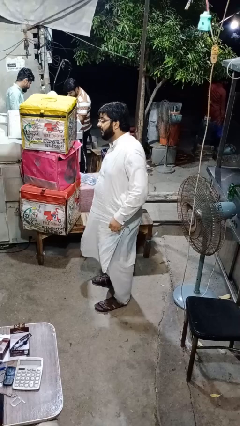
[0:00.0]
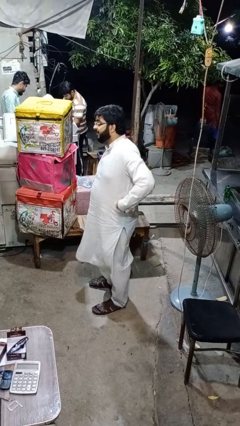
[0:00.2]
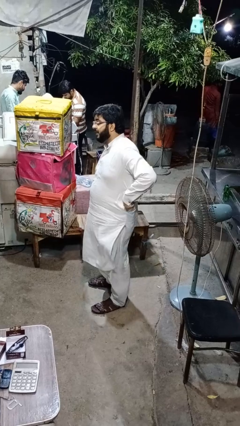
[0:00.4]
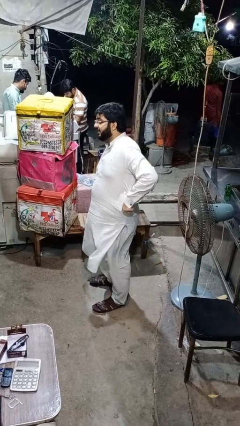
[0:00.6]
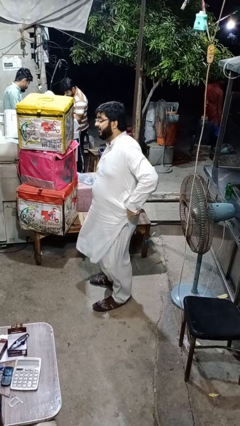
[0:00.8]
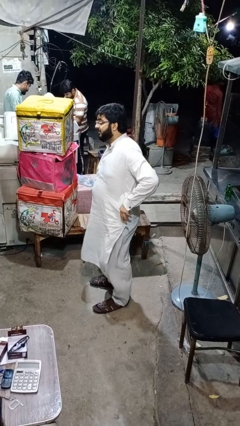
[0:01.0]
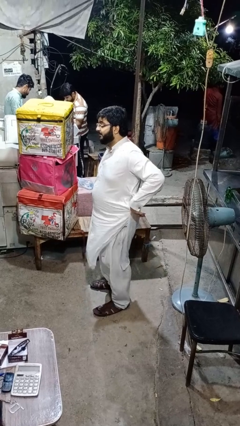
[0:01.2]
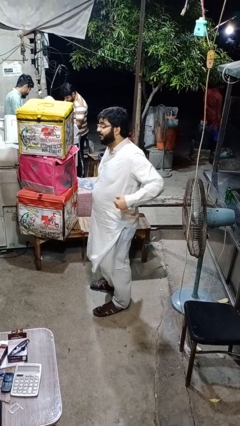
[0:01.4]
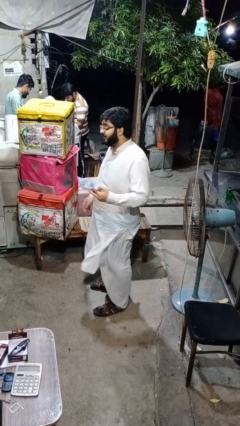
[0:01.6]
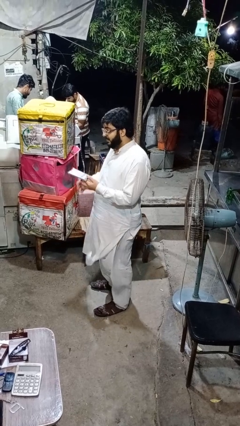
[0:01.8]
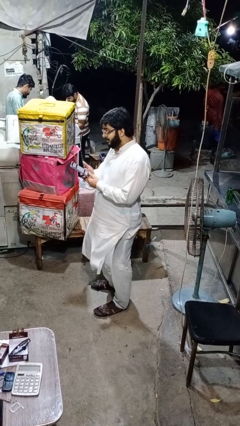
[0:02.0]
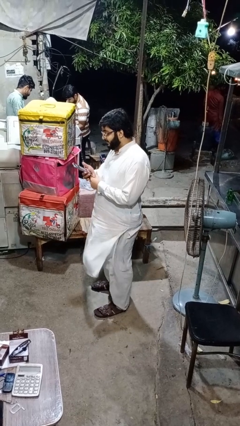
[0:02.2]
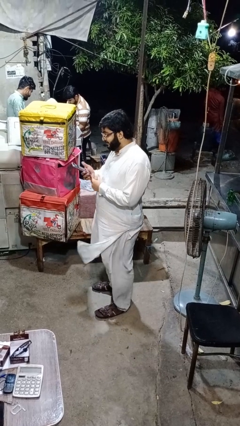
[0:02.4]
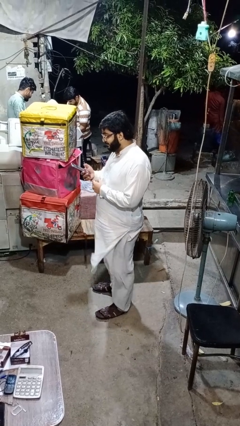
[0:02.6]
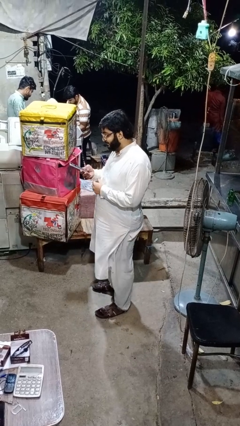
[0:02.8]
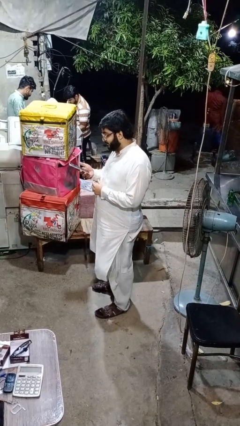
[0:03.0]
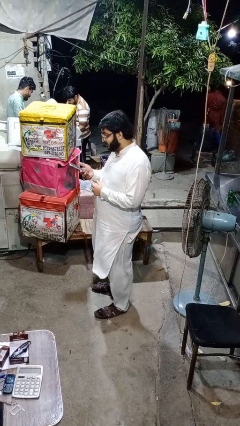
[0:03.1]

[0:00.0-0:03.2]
person takes phone from pocket

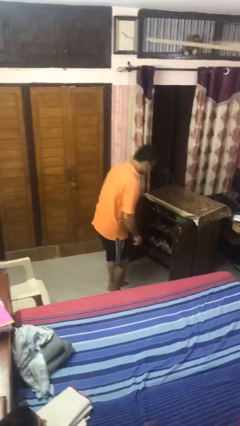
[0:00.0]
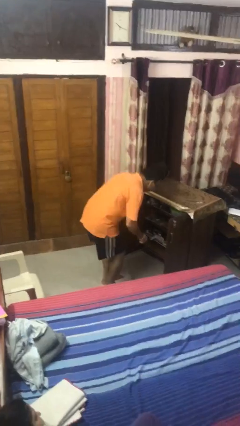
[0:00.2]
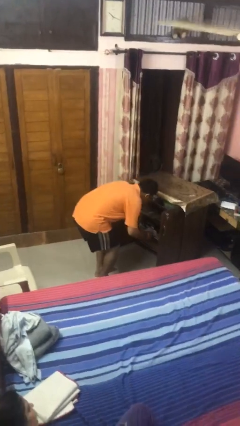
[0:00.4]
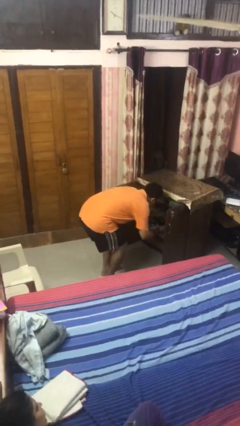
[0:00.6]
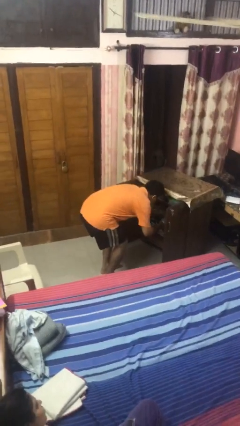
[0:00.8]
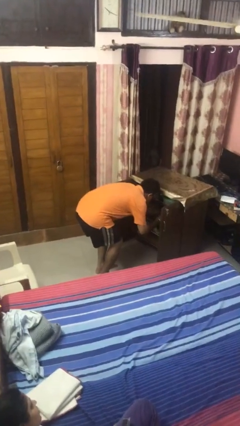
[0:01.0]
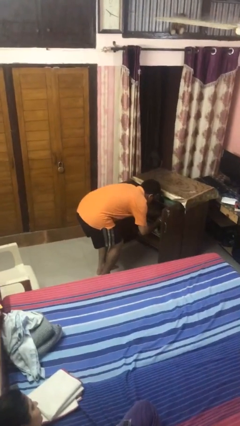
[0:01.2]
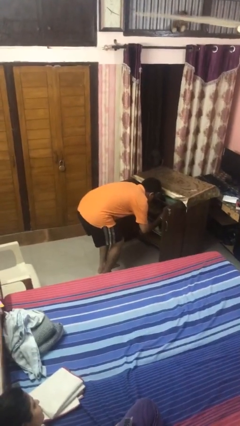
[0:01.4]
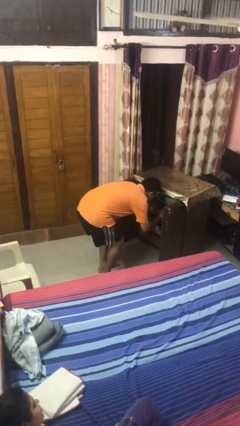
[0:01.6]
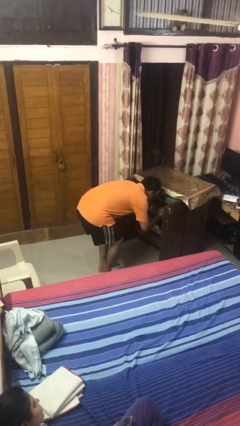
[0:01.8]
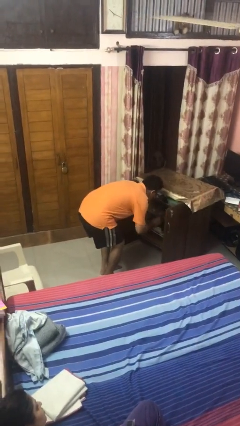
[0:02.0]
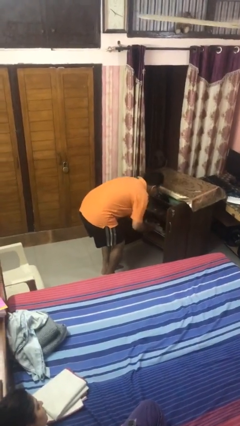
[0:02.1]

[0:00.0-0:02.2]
person searches in cabinet

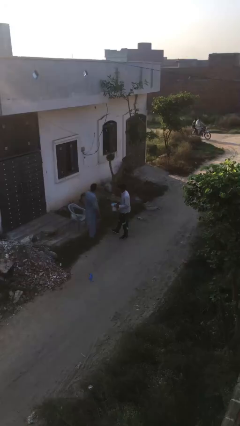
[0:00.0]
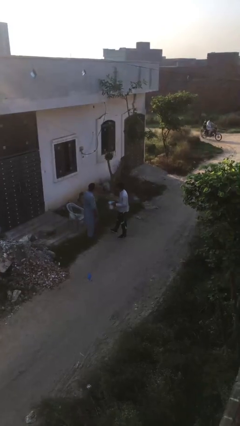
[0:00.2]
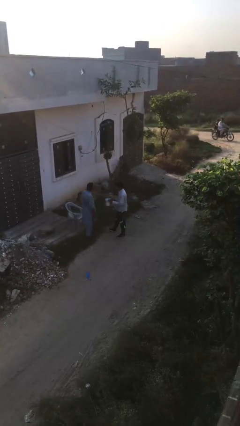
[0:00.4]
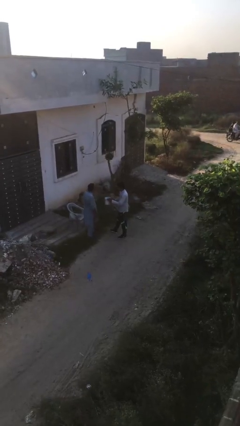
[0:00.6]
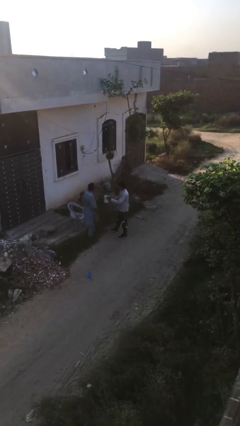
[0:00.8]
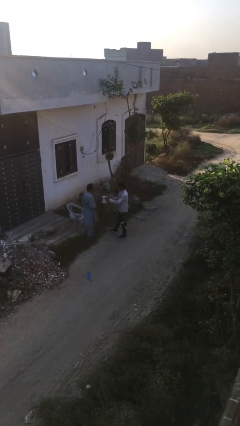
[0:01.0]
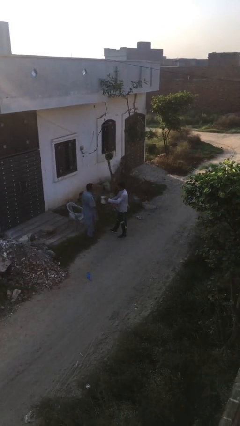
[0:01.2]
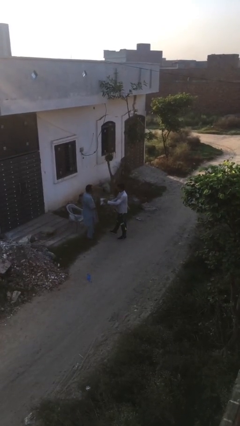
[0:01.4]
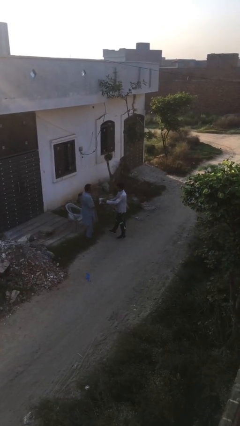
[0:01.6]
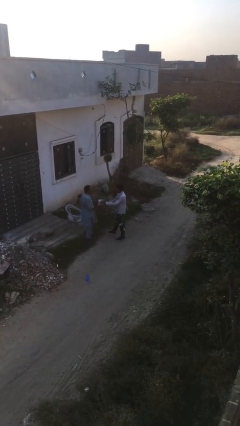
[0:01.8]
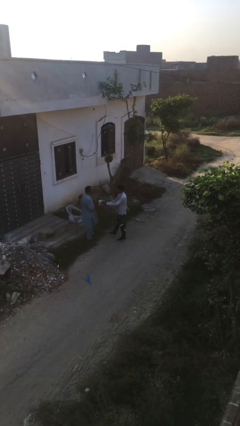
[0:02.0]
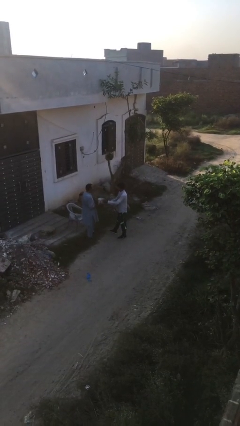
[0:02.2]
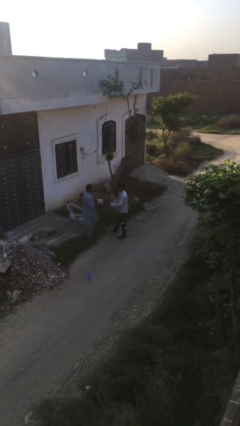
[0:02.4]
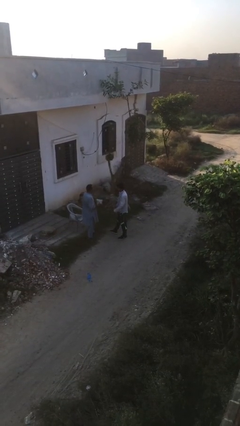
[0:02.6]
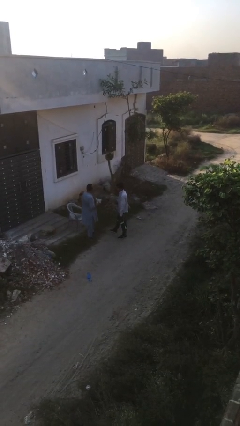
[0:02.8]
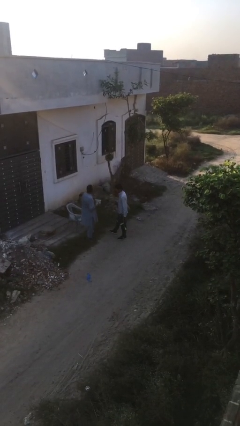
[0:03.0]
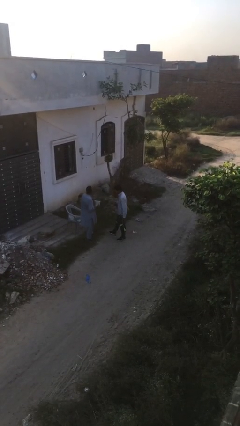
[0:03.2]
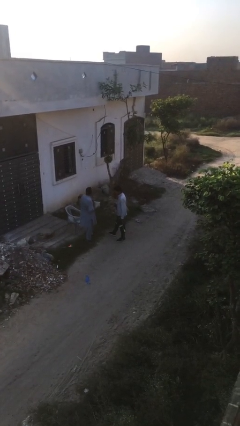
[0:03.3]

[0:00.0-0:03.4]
person transfers object to person

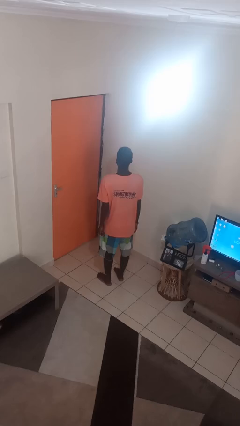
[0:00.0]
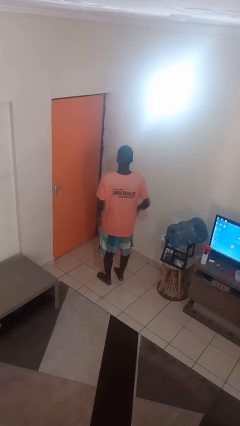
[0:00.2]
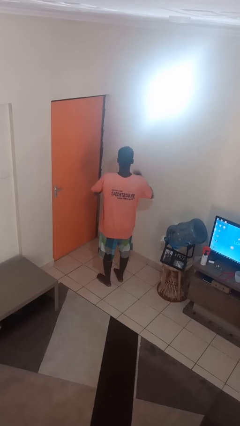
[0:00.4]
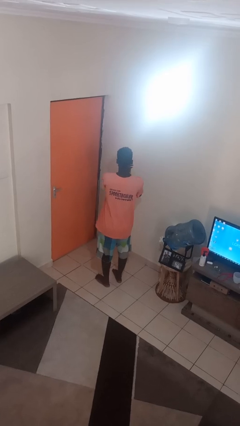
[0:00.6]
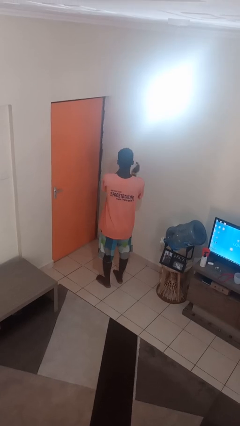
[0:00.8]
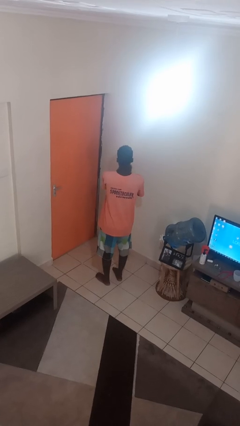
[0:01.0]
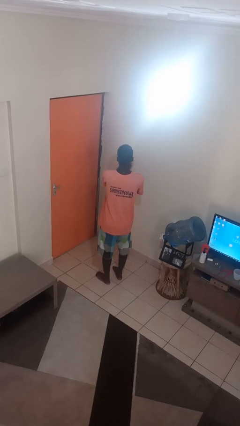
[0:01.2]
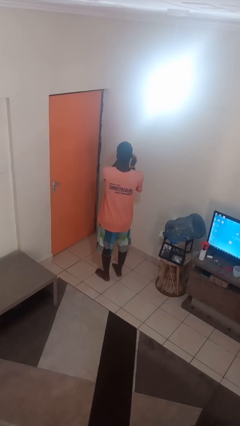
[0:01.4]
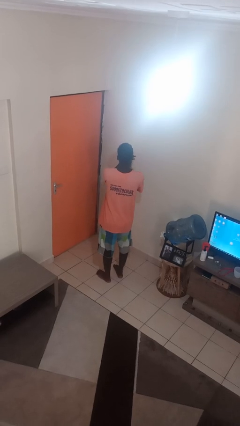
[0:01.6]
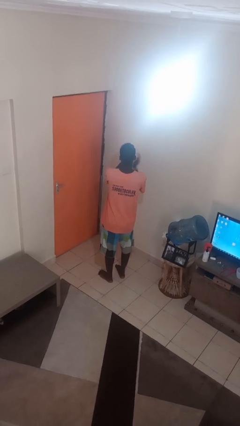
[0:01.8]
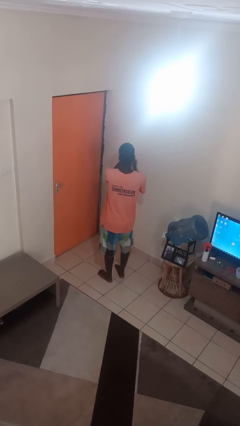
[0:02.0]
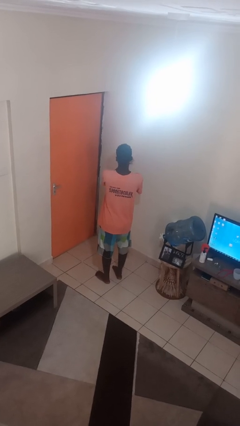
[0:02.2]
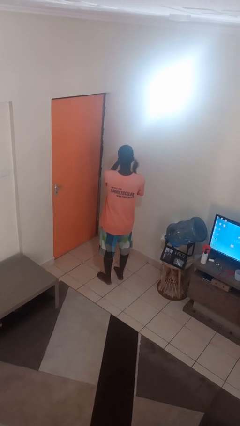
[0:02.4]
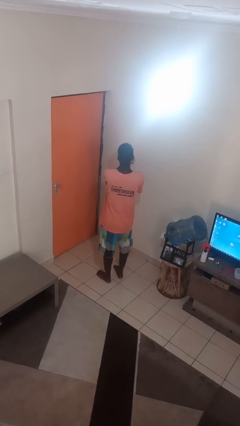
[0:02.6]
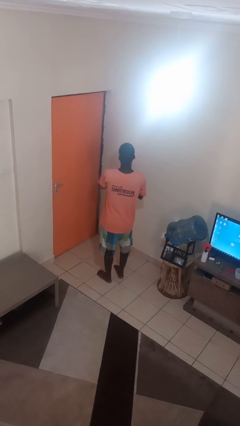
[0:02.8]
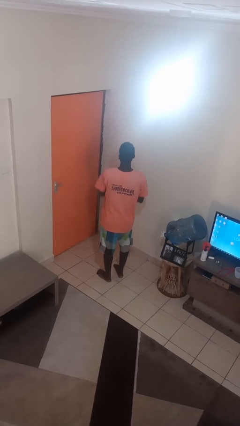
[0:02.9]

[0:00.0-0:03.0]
person claps hands

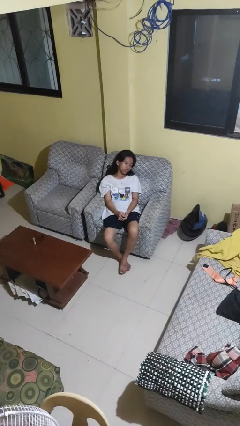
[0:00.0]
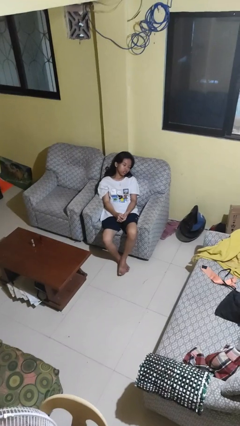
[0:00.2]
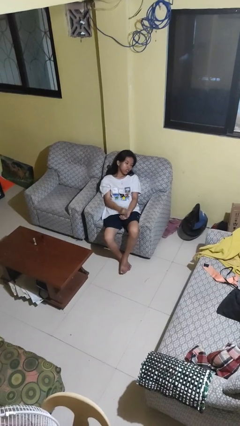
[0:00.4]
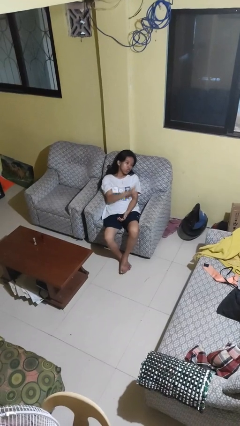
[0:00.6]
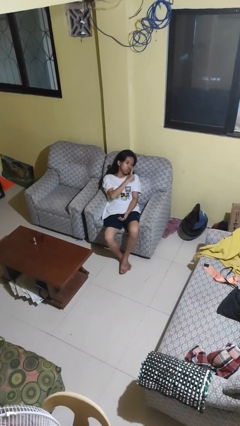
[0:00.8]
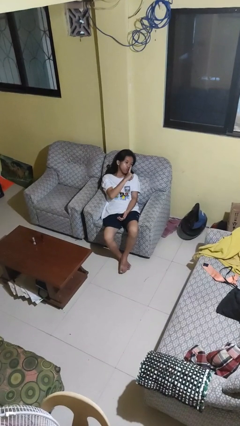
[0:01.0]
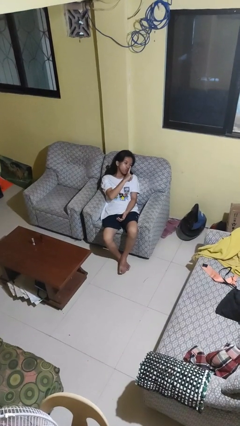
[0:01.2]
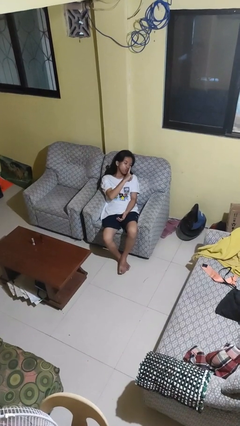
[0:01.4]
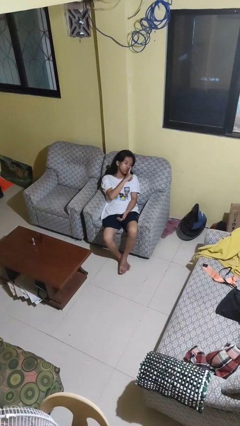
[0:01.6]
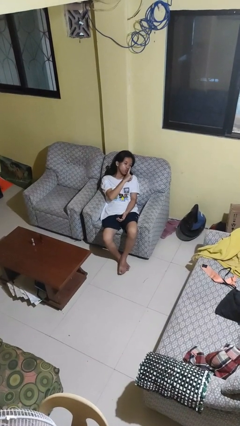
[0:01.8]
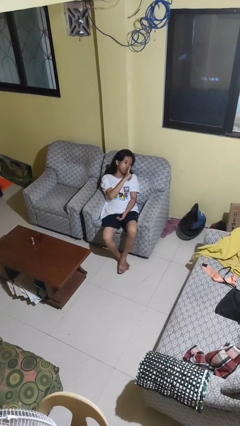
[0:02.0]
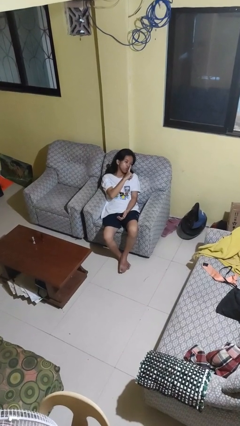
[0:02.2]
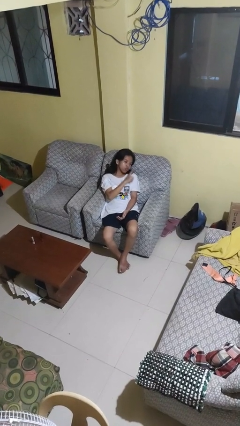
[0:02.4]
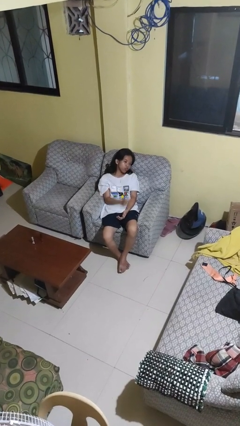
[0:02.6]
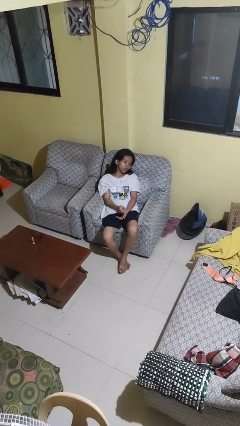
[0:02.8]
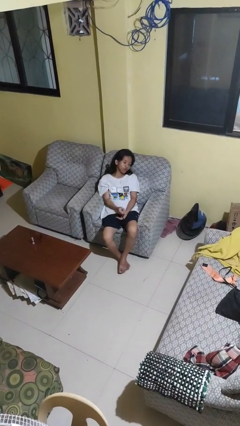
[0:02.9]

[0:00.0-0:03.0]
person gestures be quiet

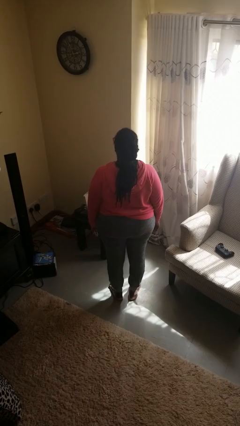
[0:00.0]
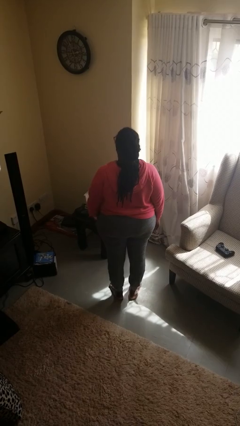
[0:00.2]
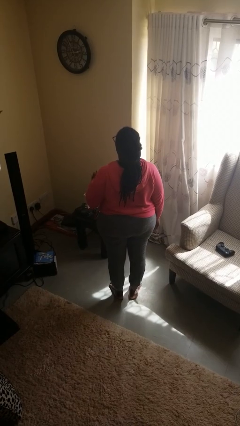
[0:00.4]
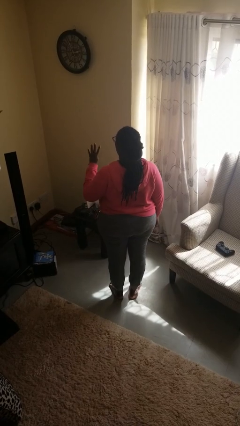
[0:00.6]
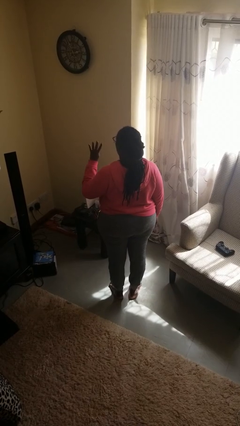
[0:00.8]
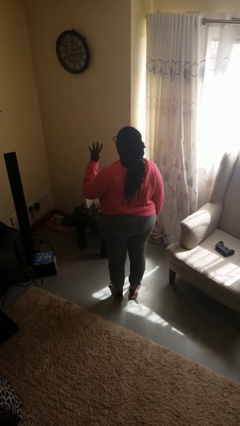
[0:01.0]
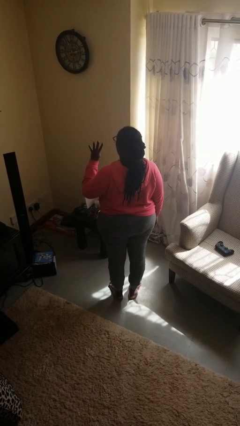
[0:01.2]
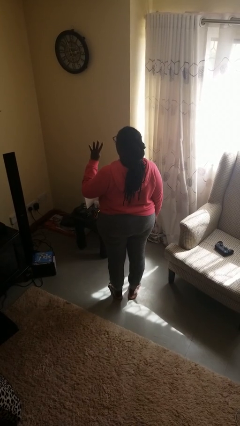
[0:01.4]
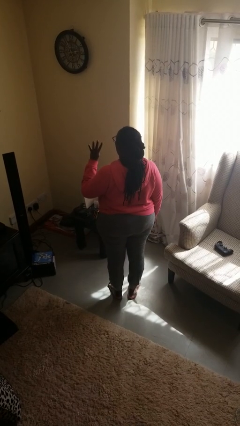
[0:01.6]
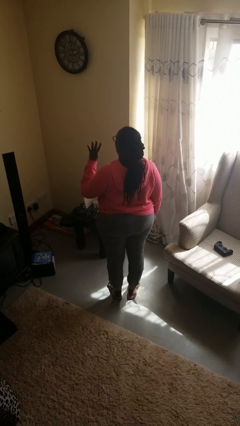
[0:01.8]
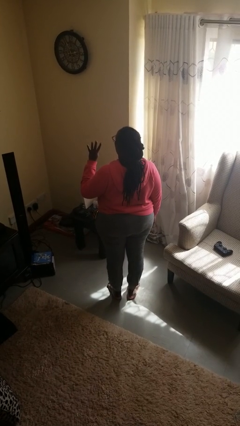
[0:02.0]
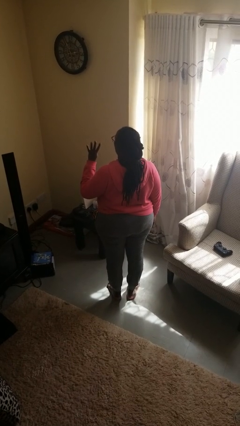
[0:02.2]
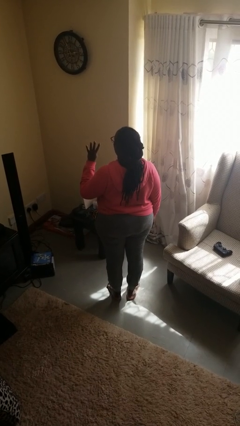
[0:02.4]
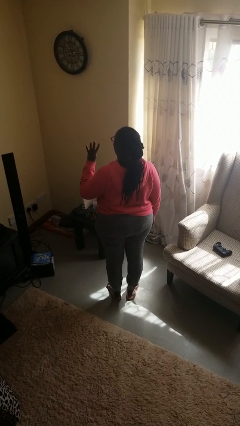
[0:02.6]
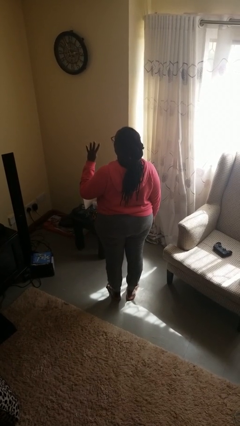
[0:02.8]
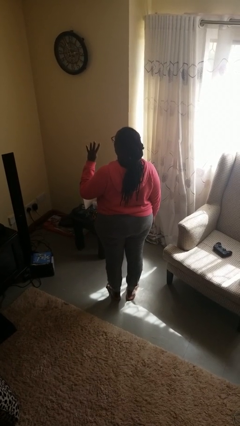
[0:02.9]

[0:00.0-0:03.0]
person gestures number four
